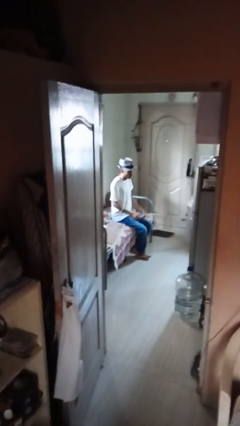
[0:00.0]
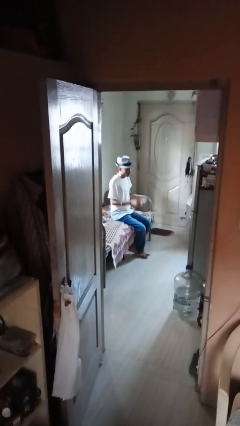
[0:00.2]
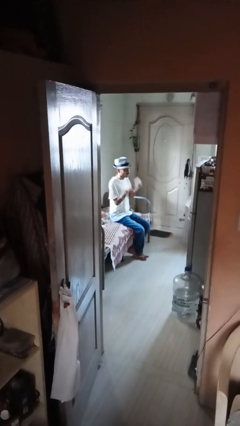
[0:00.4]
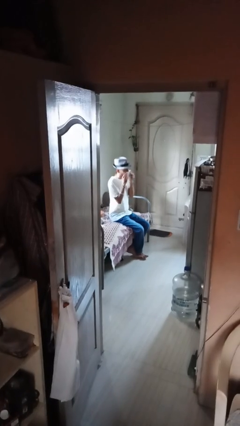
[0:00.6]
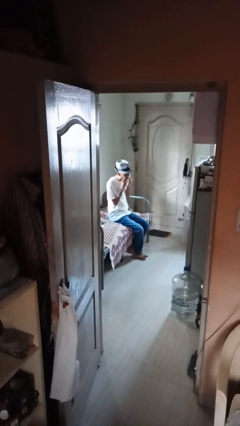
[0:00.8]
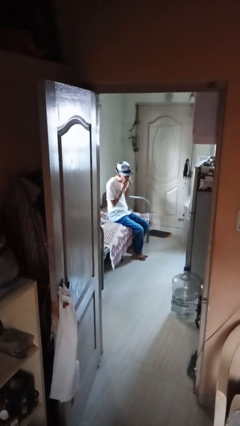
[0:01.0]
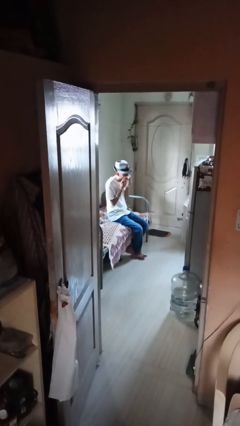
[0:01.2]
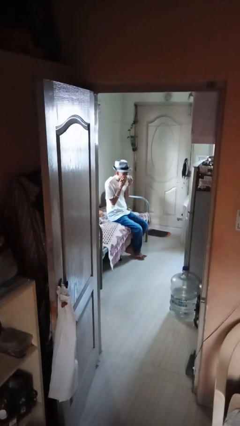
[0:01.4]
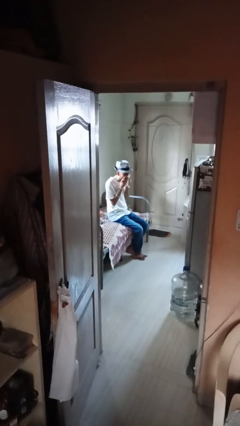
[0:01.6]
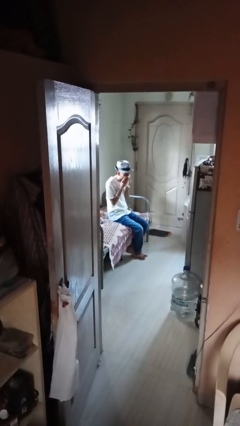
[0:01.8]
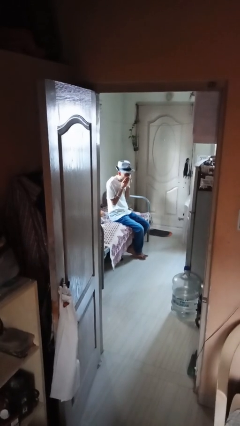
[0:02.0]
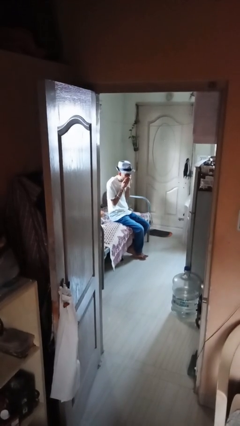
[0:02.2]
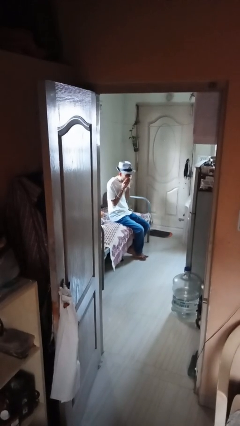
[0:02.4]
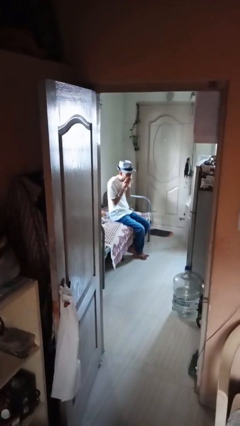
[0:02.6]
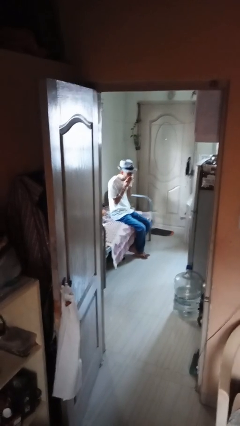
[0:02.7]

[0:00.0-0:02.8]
person blows nose

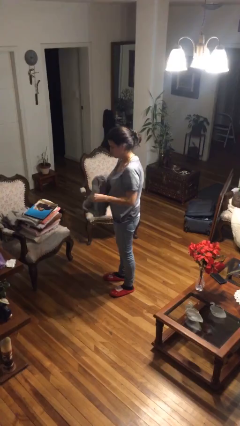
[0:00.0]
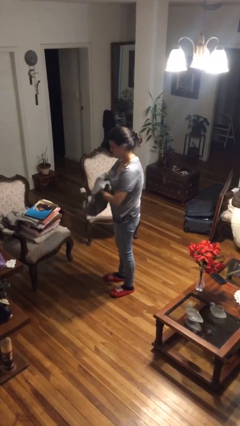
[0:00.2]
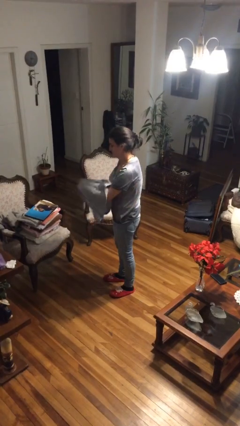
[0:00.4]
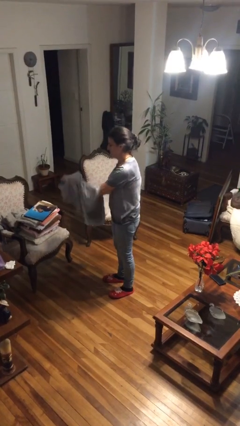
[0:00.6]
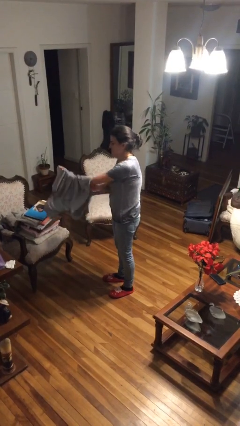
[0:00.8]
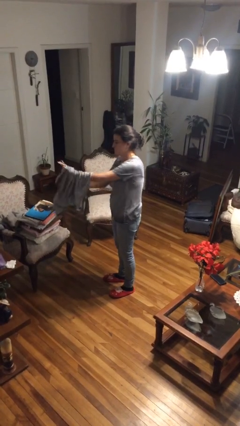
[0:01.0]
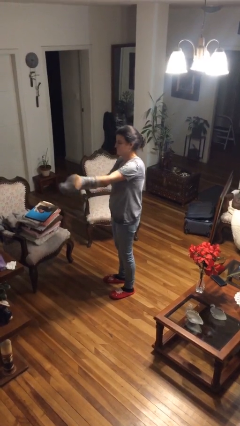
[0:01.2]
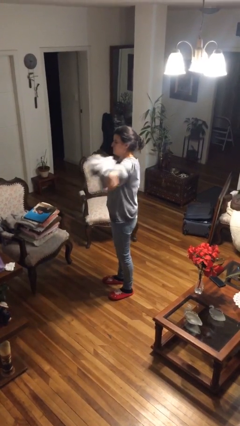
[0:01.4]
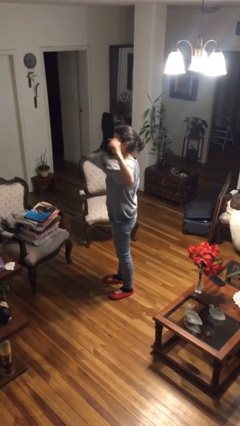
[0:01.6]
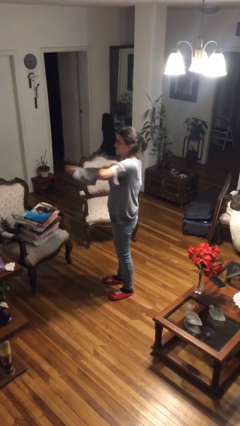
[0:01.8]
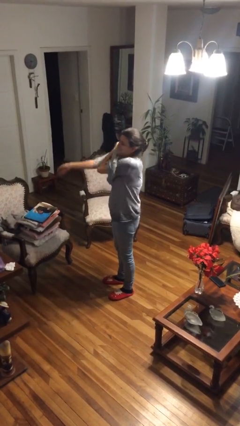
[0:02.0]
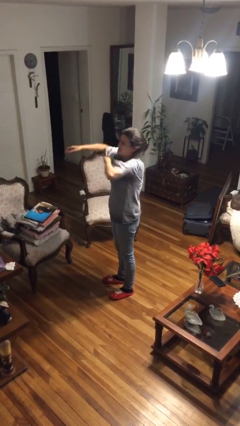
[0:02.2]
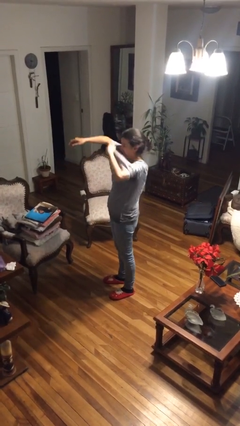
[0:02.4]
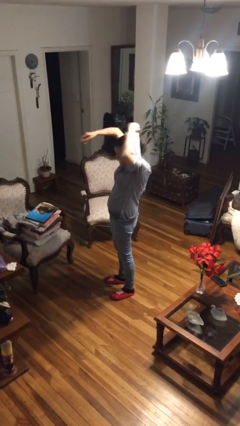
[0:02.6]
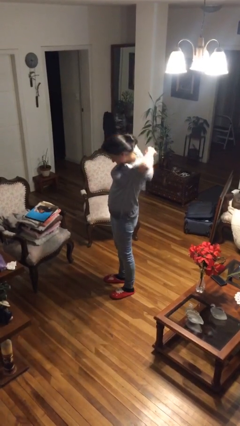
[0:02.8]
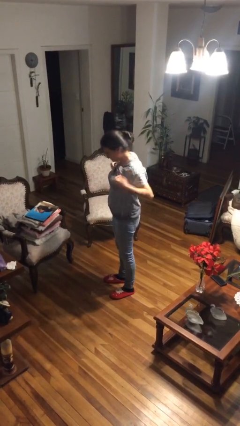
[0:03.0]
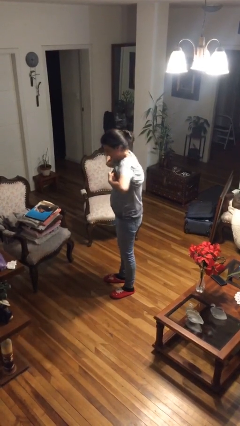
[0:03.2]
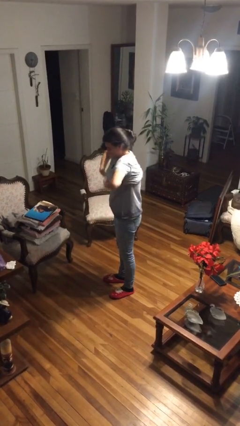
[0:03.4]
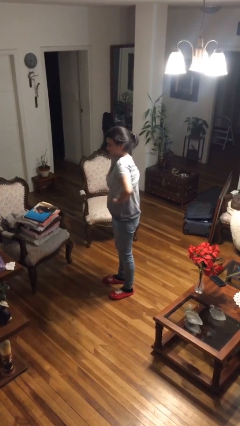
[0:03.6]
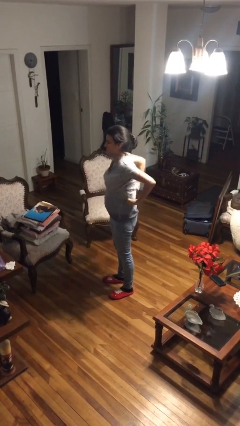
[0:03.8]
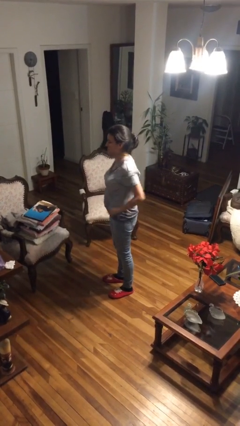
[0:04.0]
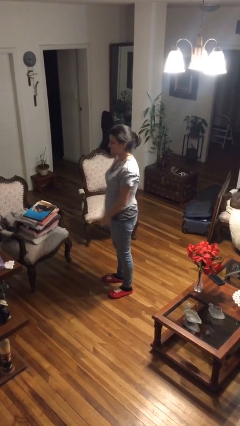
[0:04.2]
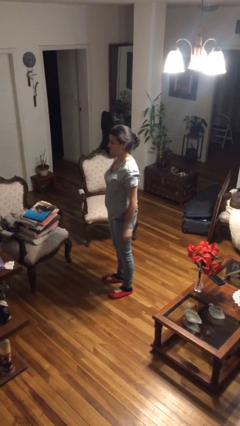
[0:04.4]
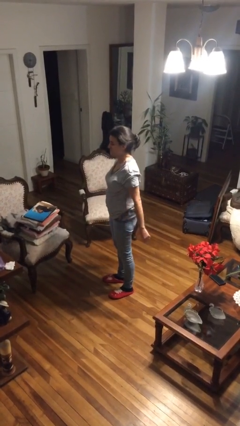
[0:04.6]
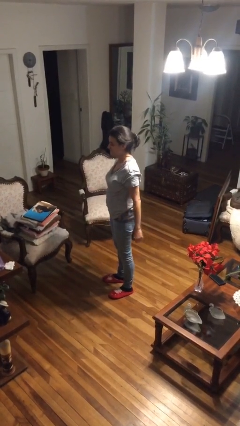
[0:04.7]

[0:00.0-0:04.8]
person puts on shirt

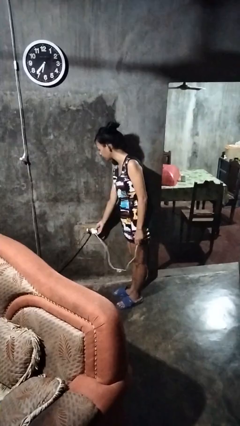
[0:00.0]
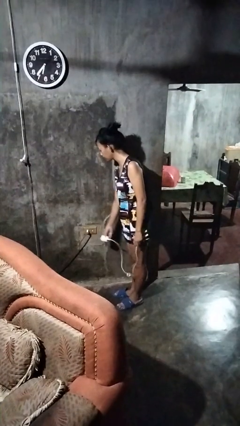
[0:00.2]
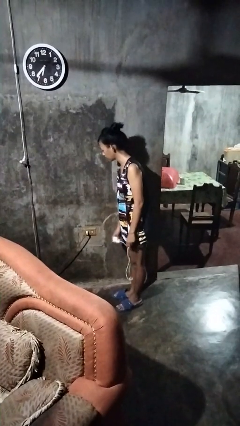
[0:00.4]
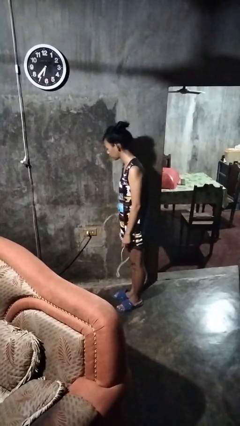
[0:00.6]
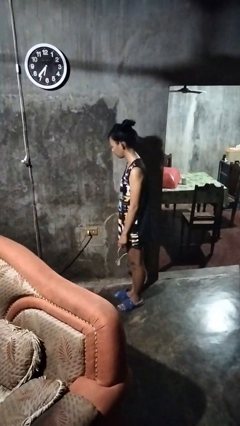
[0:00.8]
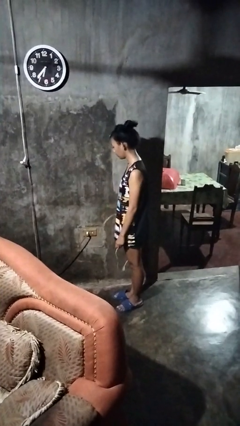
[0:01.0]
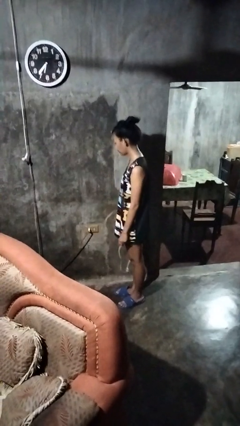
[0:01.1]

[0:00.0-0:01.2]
person unplugs from electrical socket

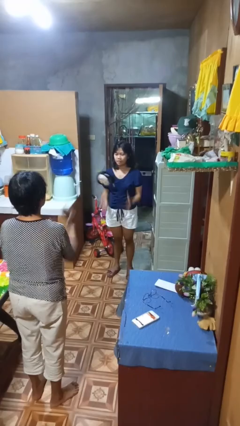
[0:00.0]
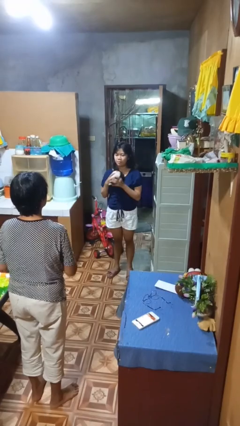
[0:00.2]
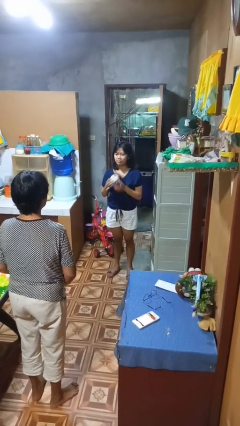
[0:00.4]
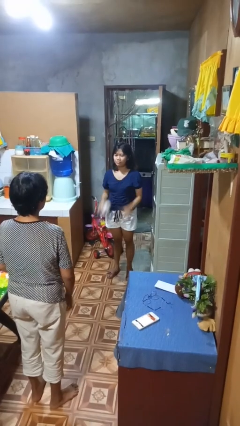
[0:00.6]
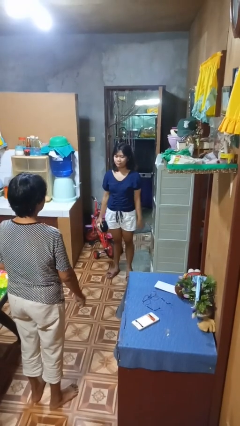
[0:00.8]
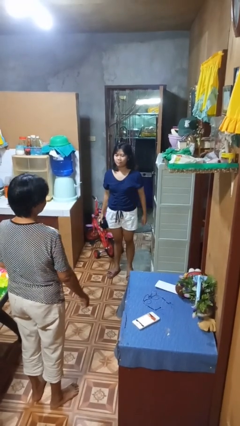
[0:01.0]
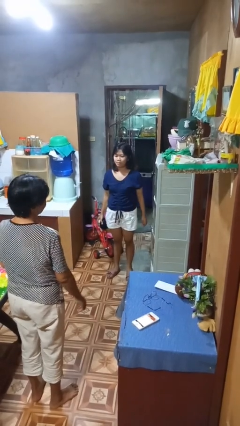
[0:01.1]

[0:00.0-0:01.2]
person catches object from person

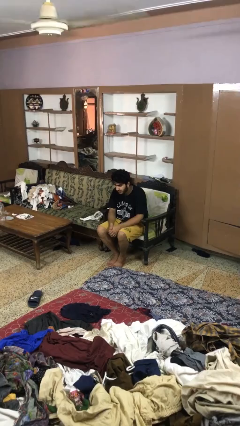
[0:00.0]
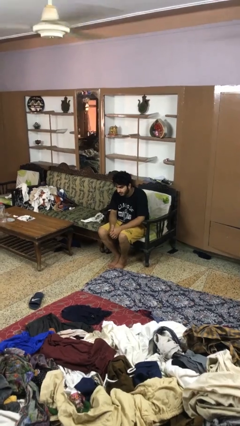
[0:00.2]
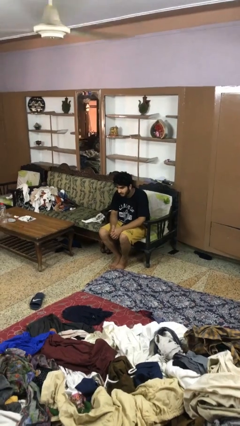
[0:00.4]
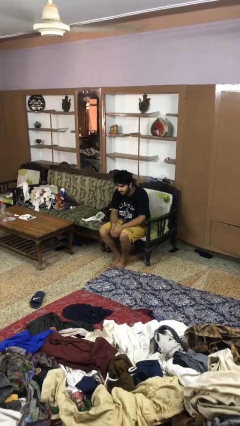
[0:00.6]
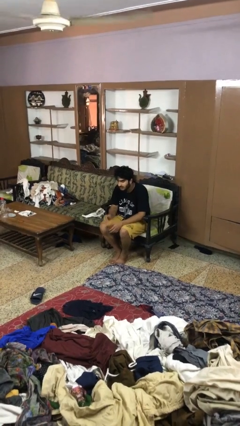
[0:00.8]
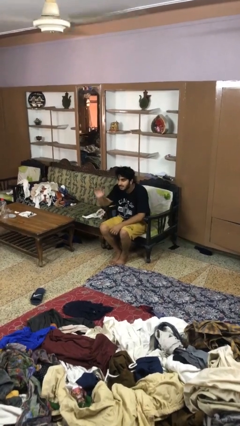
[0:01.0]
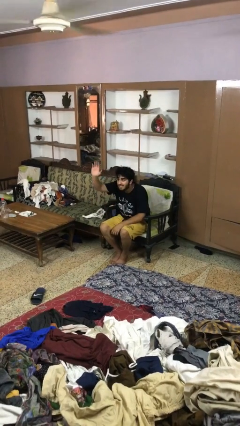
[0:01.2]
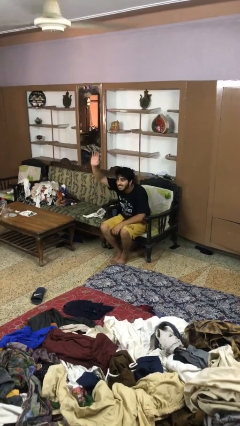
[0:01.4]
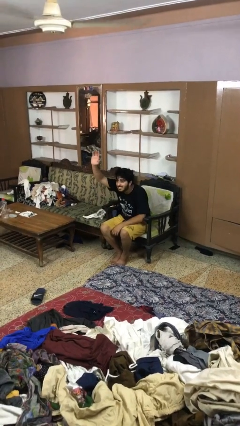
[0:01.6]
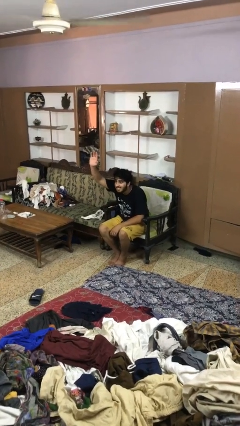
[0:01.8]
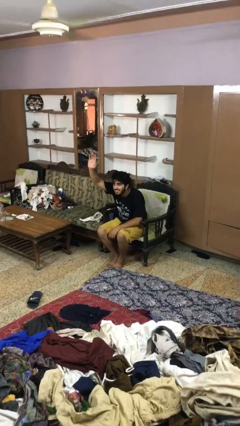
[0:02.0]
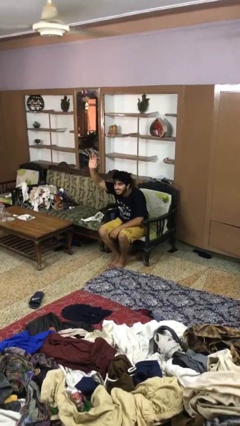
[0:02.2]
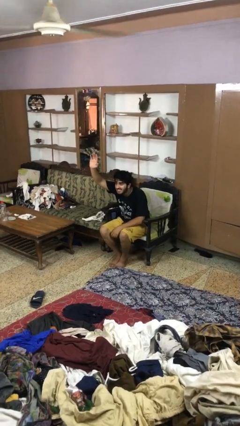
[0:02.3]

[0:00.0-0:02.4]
person gestures raise hand

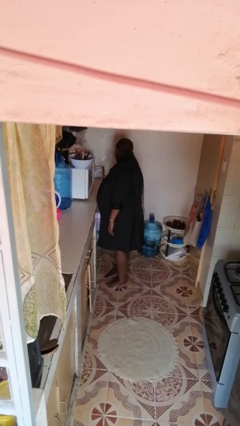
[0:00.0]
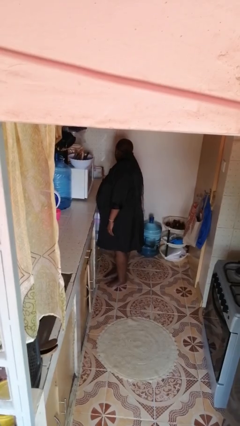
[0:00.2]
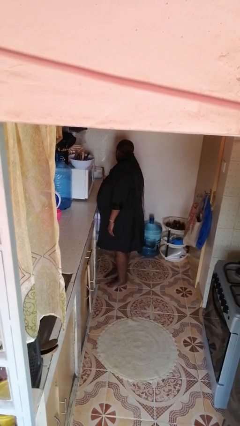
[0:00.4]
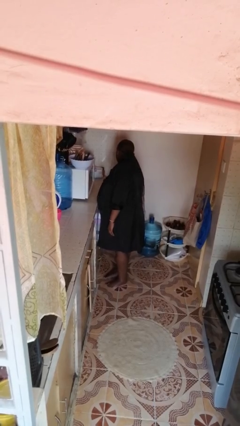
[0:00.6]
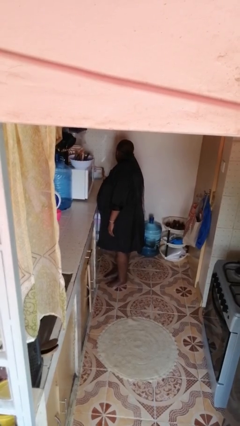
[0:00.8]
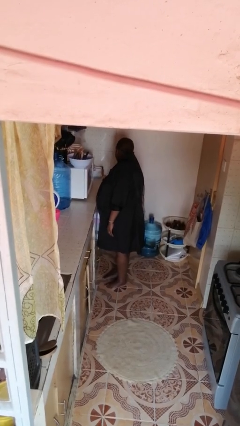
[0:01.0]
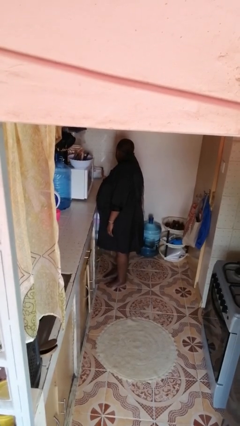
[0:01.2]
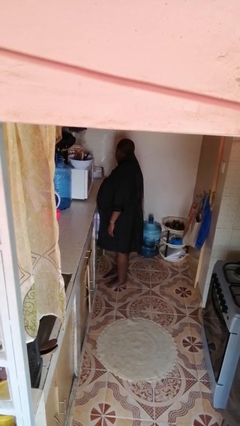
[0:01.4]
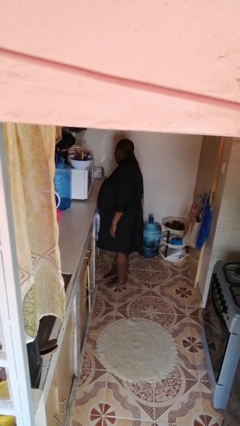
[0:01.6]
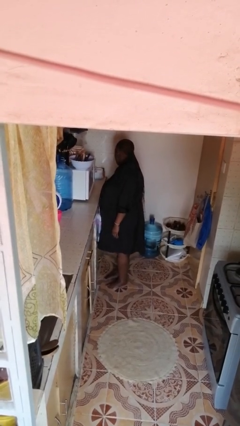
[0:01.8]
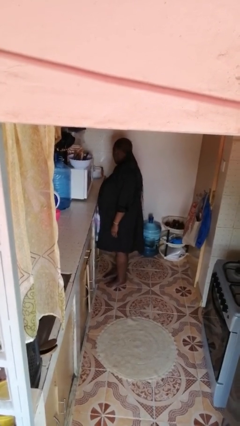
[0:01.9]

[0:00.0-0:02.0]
person closes cabinet

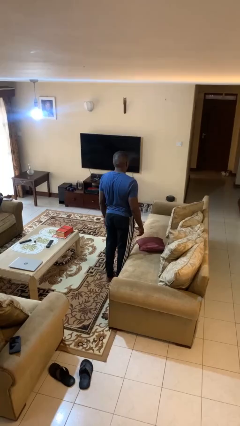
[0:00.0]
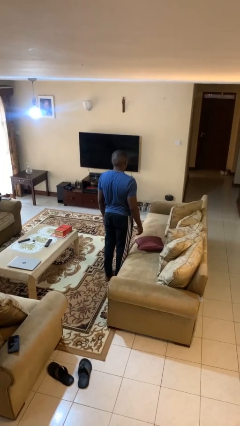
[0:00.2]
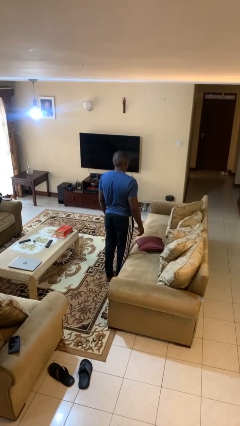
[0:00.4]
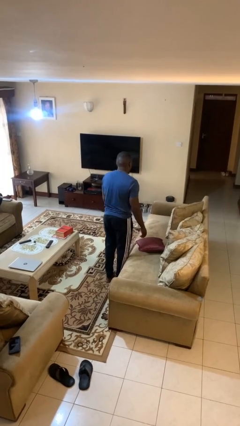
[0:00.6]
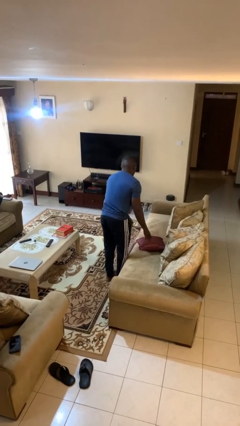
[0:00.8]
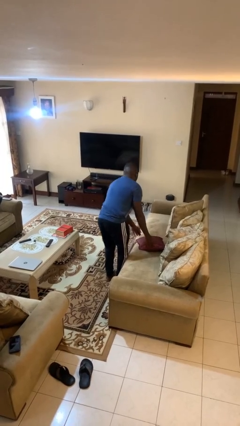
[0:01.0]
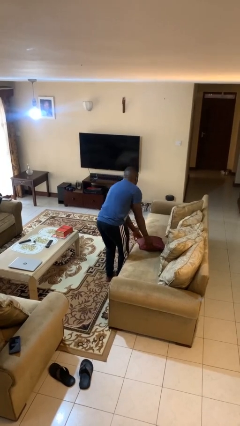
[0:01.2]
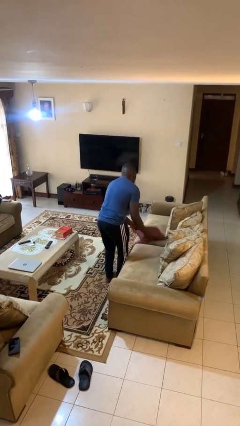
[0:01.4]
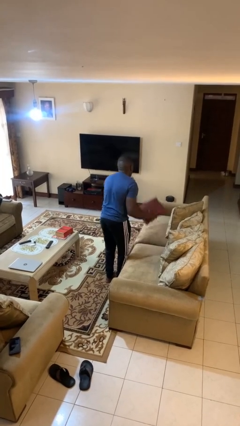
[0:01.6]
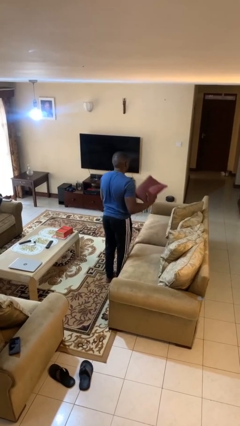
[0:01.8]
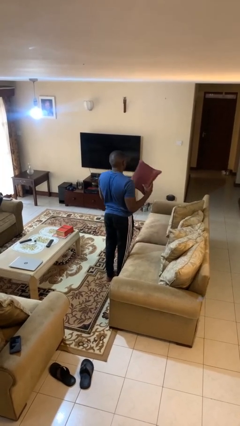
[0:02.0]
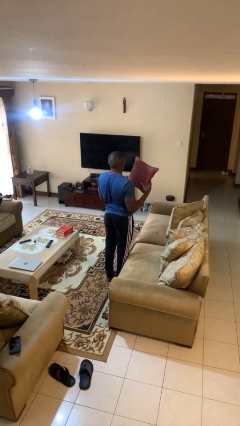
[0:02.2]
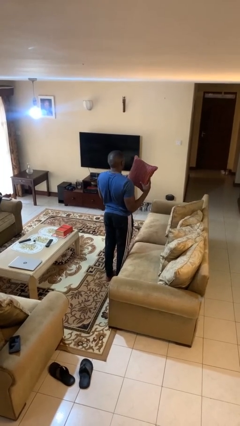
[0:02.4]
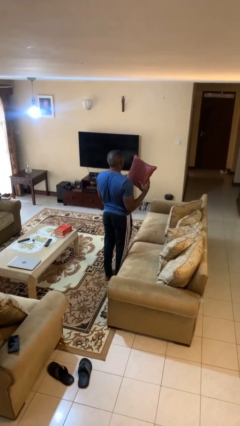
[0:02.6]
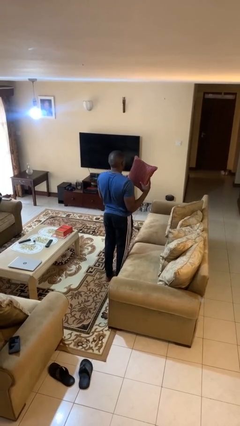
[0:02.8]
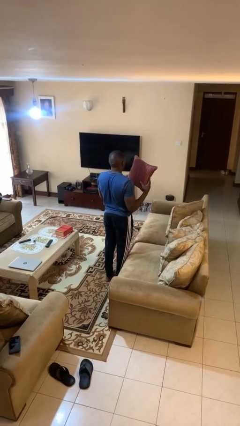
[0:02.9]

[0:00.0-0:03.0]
person picks up object from couch
